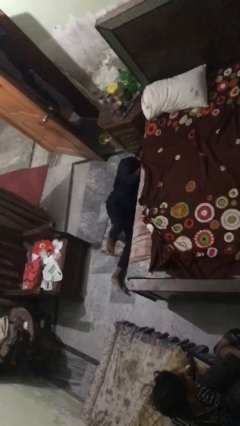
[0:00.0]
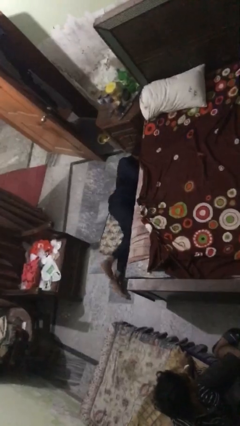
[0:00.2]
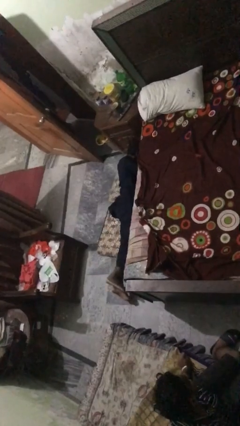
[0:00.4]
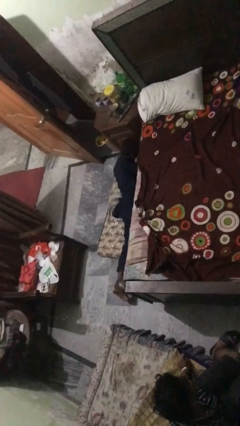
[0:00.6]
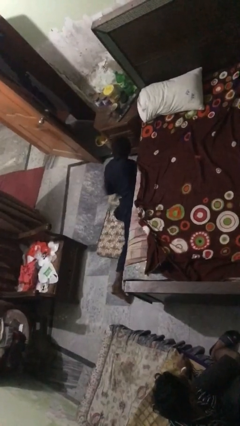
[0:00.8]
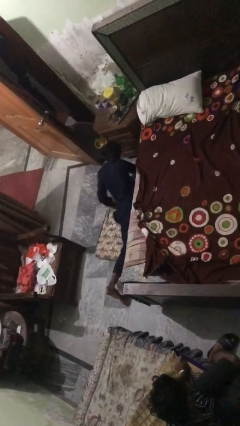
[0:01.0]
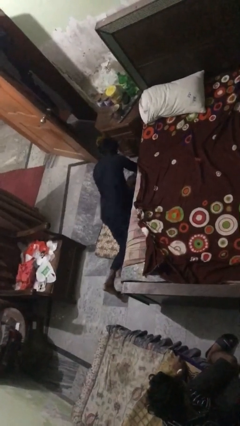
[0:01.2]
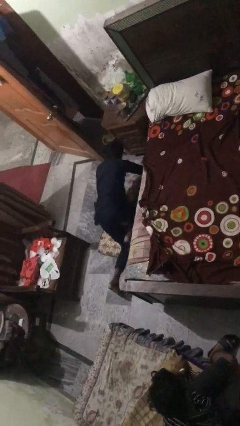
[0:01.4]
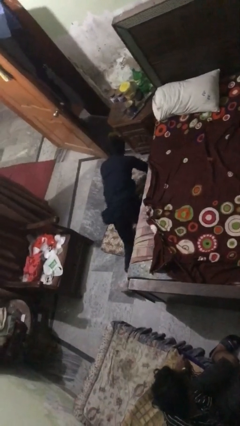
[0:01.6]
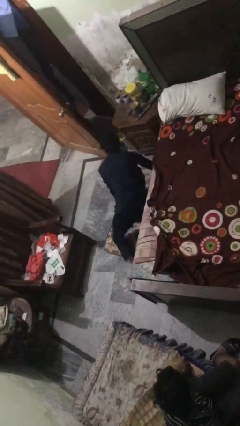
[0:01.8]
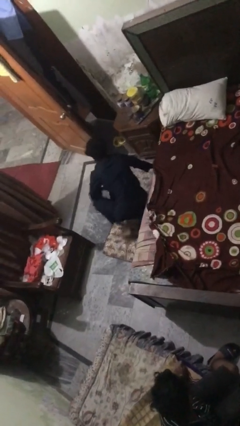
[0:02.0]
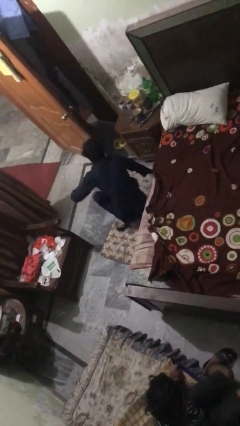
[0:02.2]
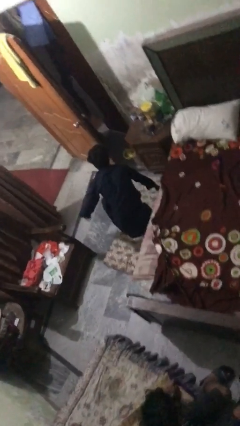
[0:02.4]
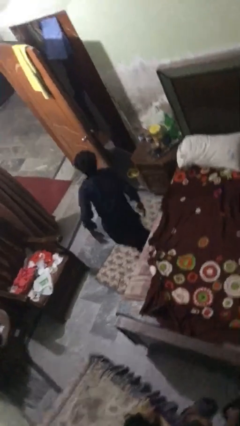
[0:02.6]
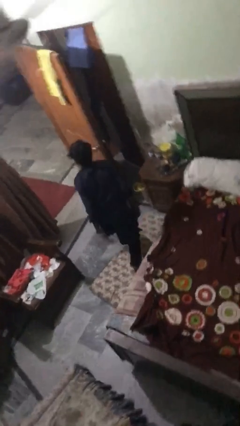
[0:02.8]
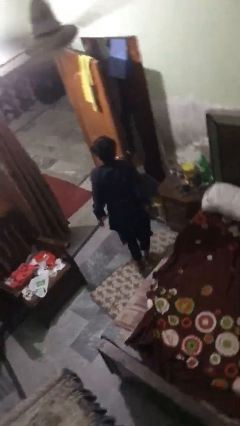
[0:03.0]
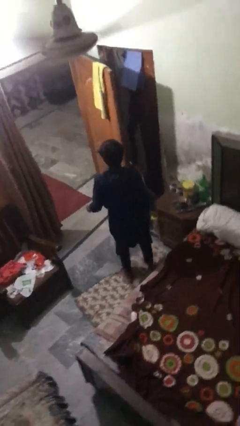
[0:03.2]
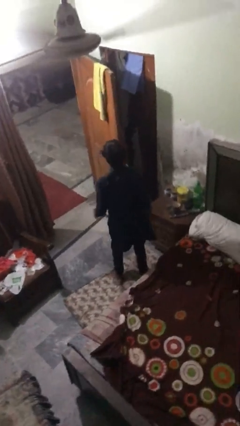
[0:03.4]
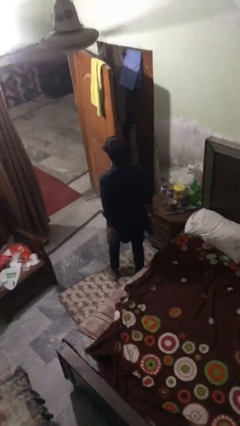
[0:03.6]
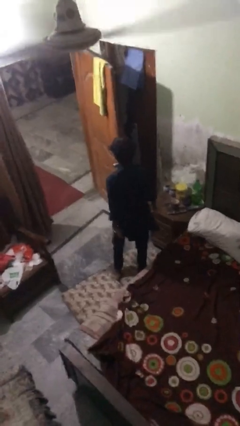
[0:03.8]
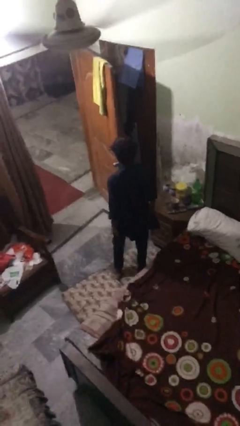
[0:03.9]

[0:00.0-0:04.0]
person stands up from floor

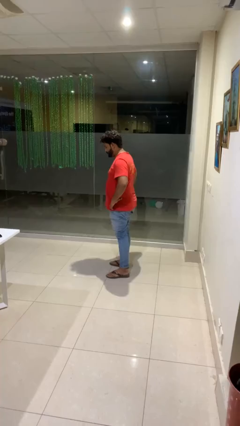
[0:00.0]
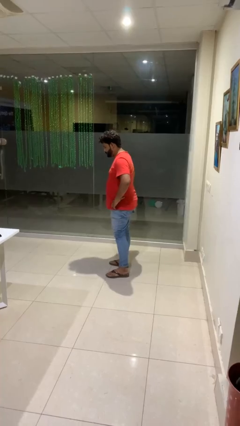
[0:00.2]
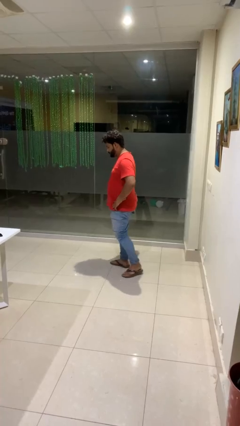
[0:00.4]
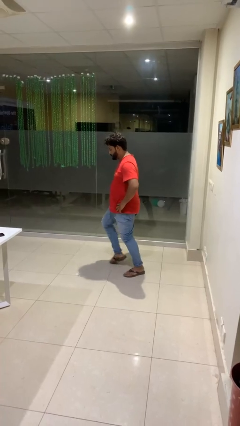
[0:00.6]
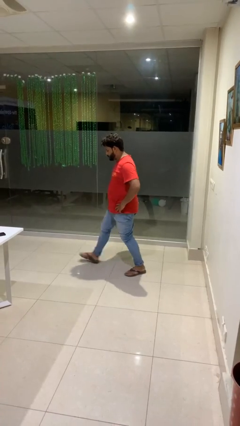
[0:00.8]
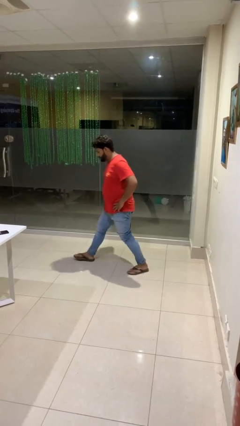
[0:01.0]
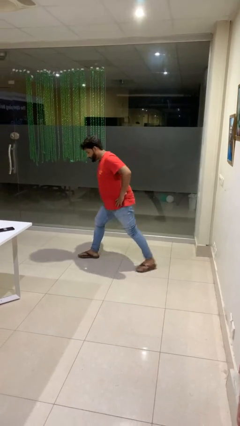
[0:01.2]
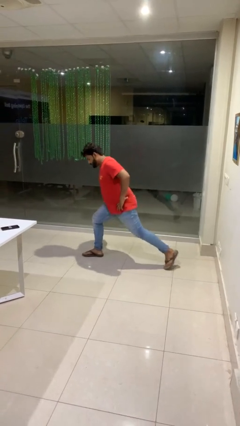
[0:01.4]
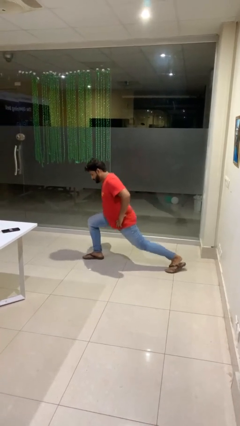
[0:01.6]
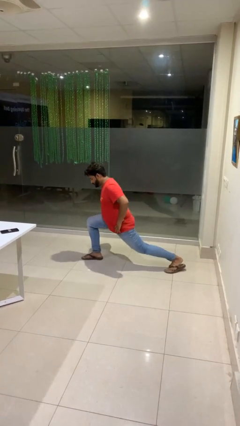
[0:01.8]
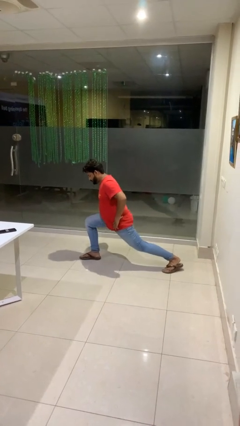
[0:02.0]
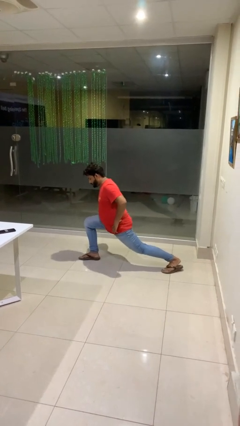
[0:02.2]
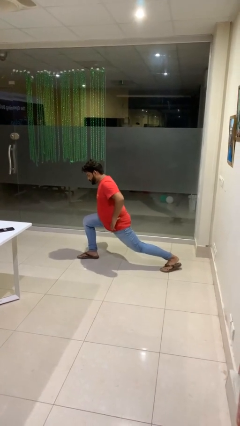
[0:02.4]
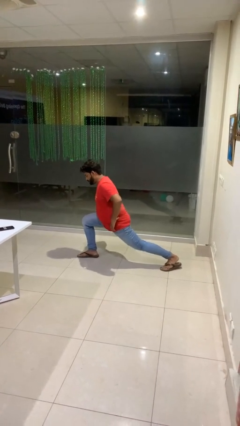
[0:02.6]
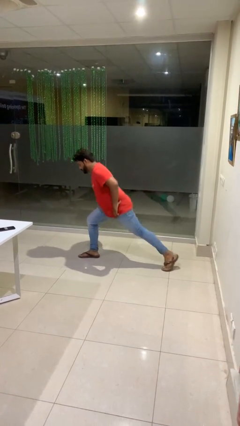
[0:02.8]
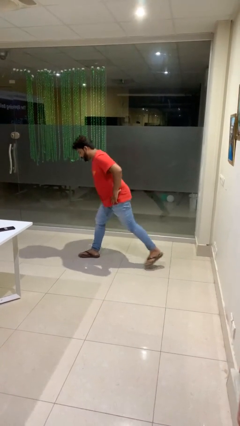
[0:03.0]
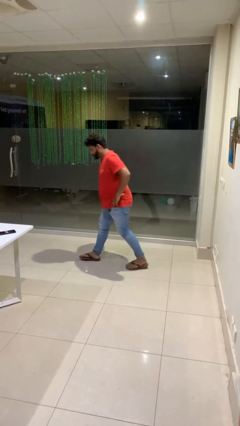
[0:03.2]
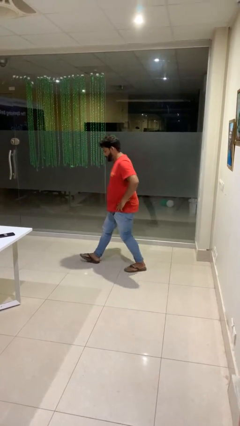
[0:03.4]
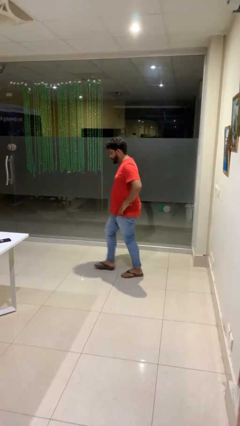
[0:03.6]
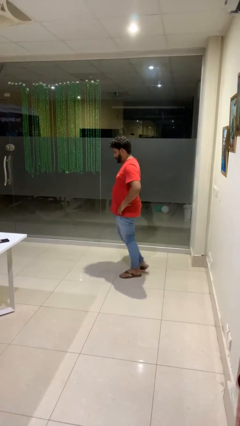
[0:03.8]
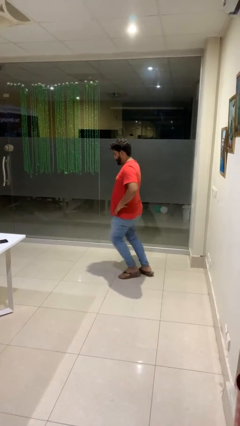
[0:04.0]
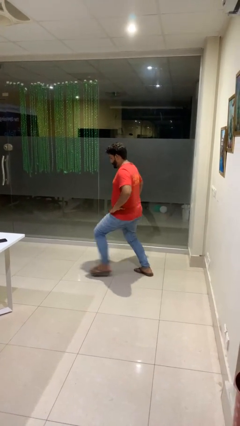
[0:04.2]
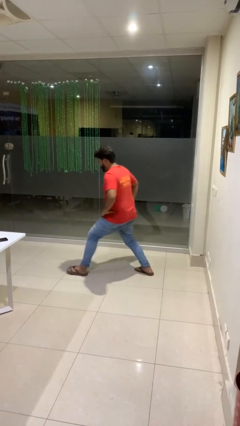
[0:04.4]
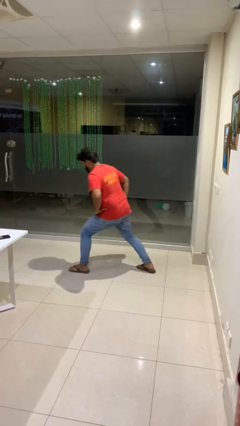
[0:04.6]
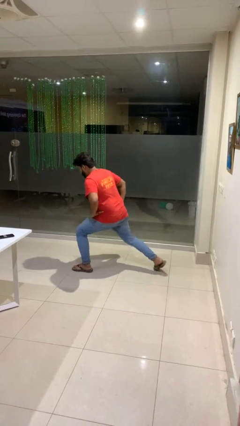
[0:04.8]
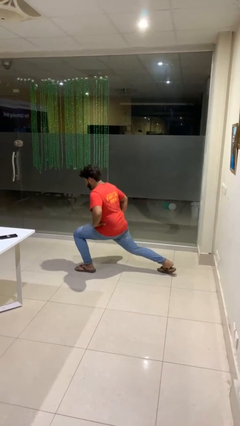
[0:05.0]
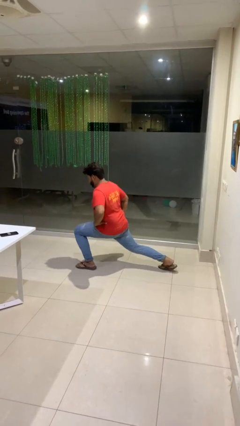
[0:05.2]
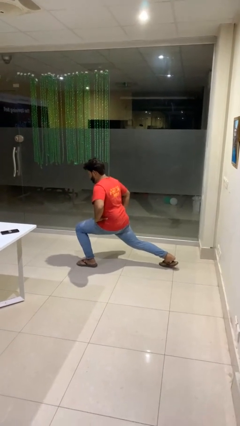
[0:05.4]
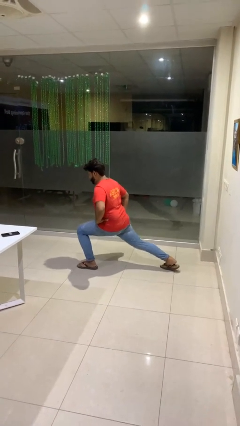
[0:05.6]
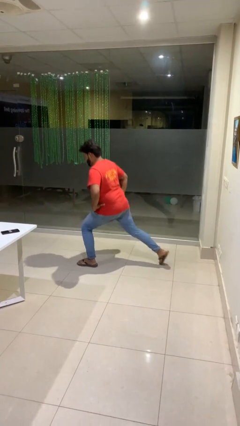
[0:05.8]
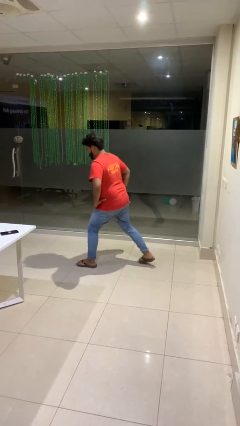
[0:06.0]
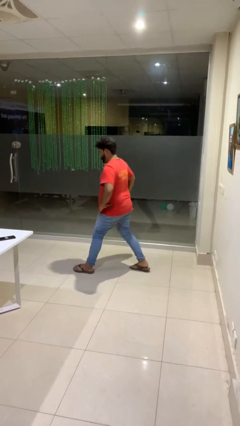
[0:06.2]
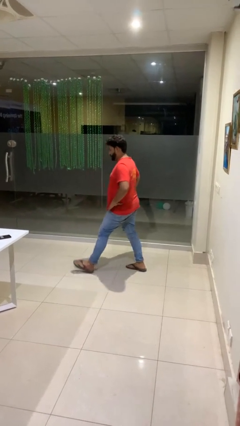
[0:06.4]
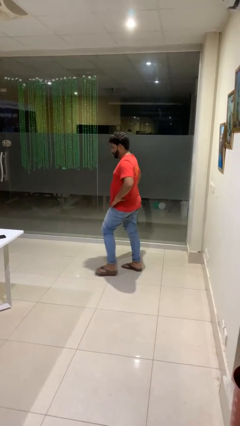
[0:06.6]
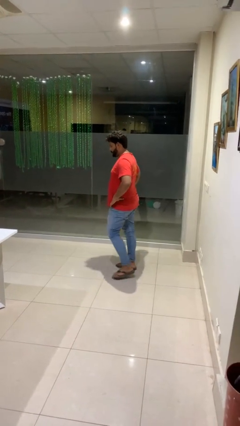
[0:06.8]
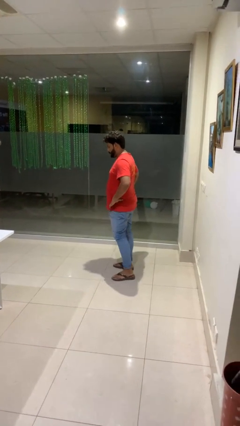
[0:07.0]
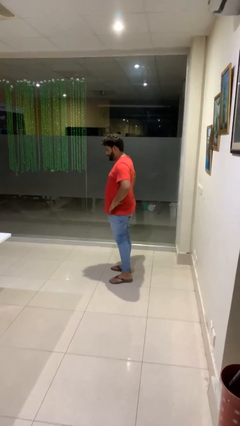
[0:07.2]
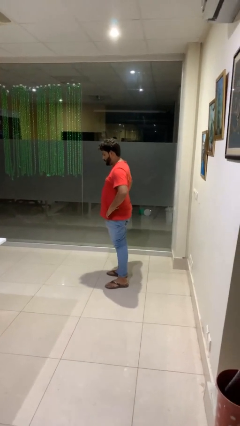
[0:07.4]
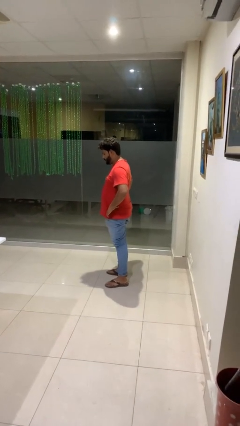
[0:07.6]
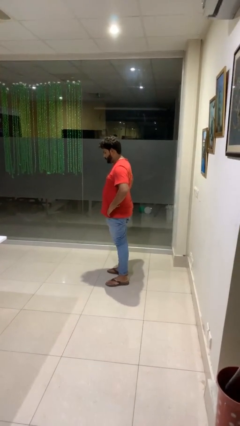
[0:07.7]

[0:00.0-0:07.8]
person exercises with lunges

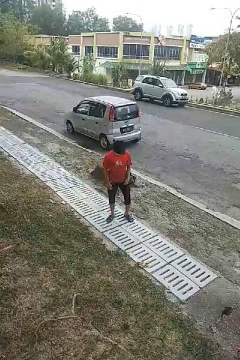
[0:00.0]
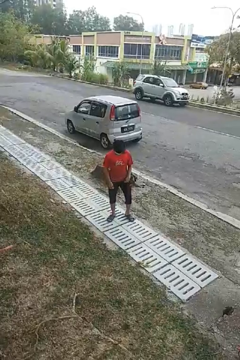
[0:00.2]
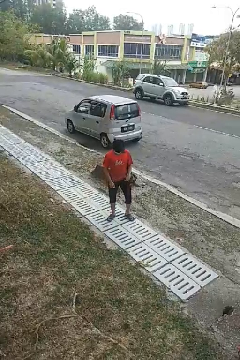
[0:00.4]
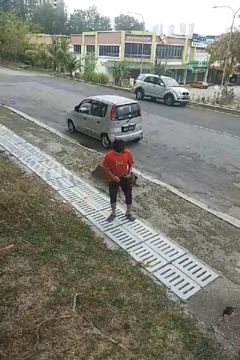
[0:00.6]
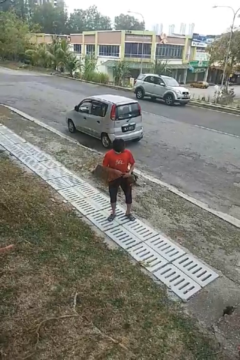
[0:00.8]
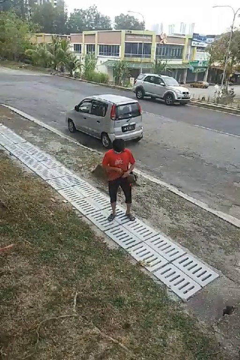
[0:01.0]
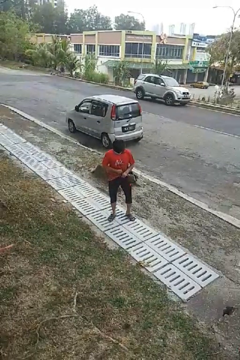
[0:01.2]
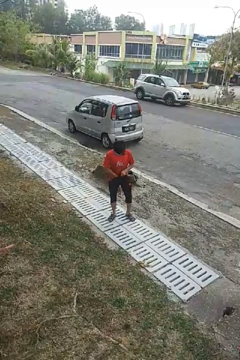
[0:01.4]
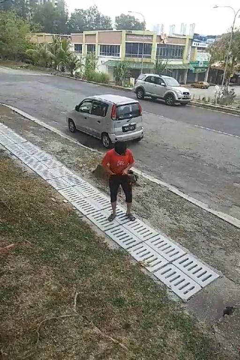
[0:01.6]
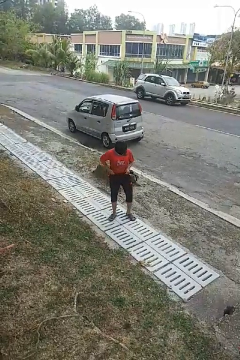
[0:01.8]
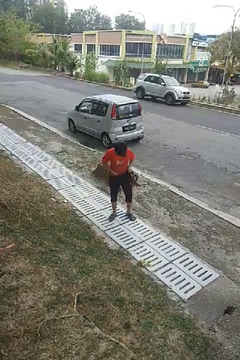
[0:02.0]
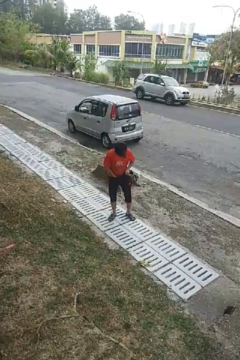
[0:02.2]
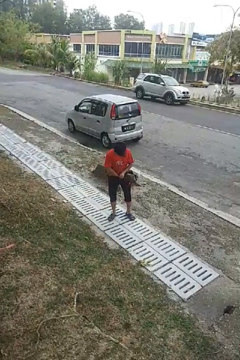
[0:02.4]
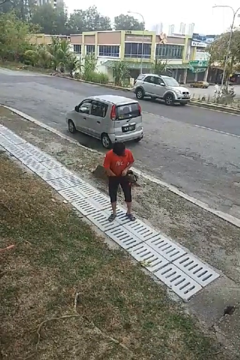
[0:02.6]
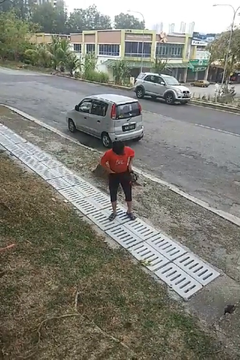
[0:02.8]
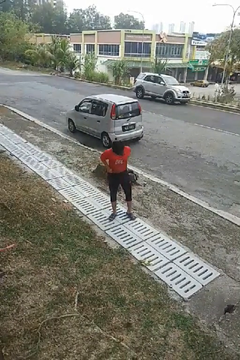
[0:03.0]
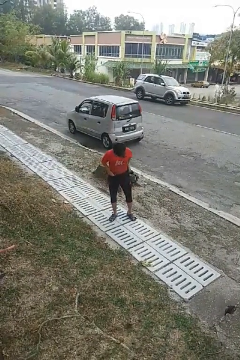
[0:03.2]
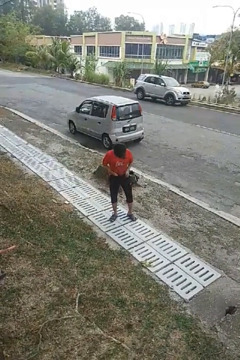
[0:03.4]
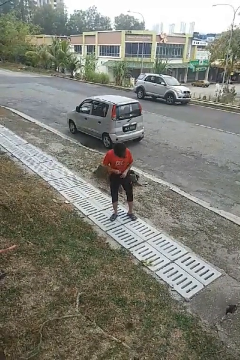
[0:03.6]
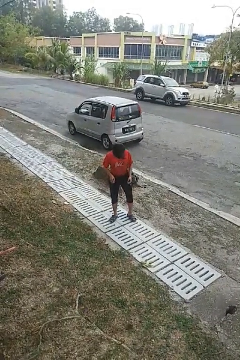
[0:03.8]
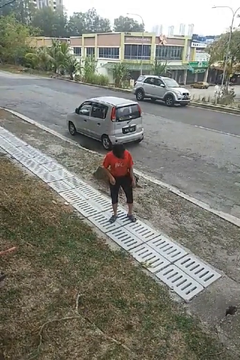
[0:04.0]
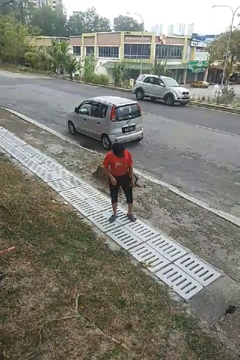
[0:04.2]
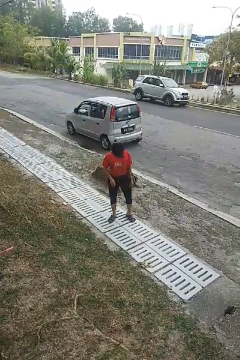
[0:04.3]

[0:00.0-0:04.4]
person tucks in shirt

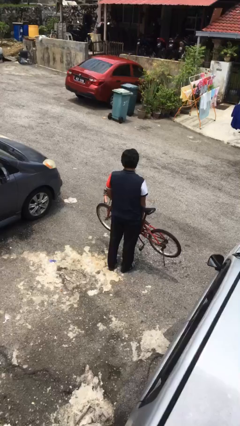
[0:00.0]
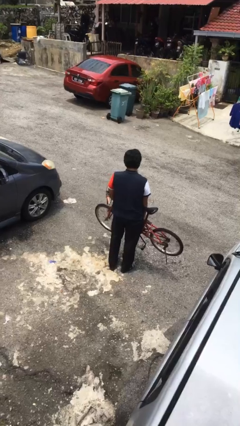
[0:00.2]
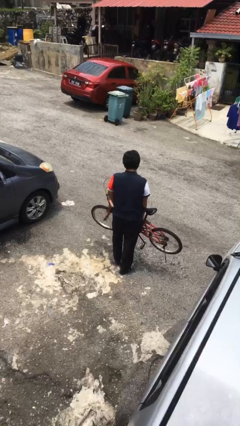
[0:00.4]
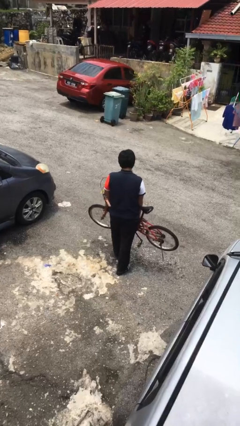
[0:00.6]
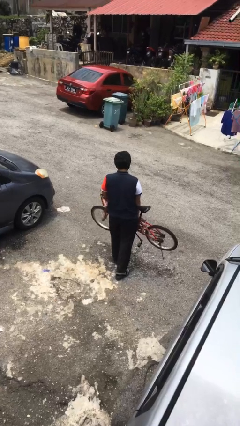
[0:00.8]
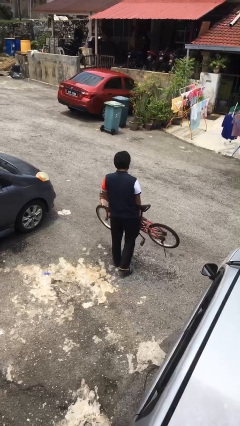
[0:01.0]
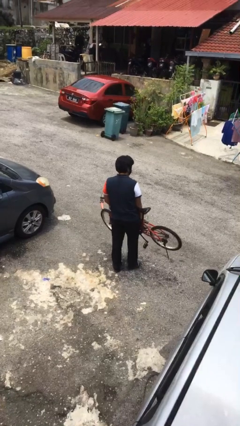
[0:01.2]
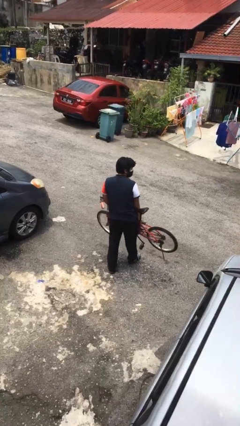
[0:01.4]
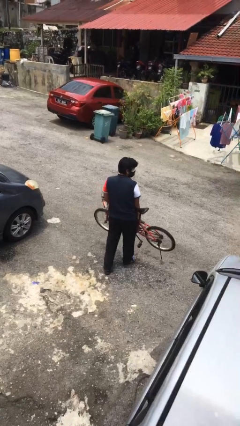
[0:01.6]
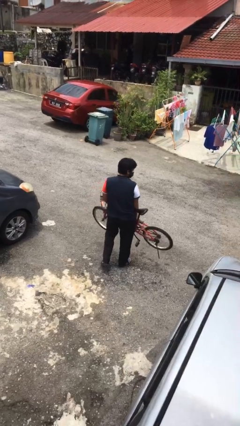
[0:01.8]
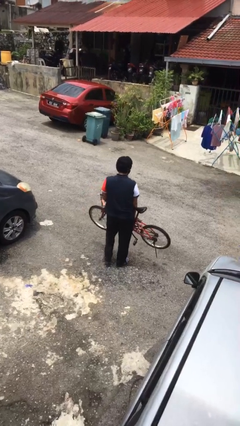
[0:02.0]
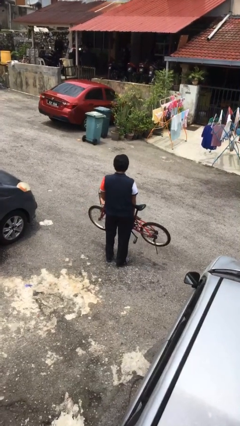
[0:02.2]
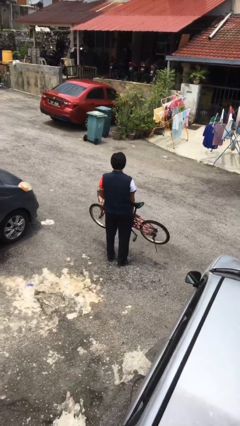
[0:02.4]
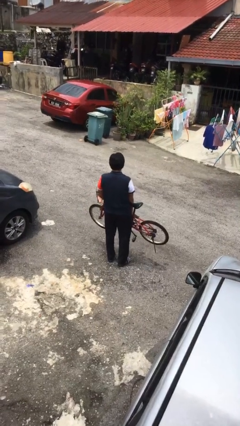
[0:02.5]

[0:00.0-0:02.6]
person carries bicycle

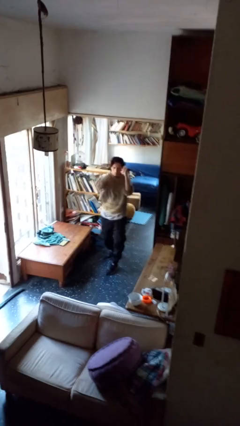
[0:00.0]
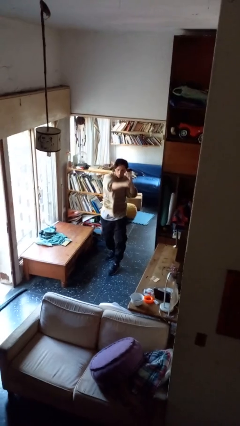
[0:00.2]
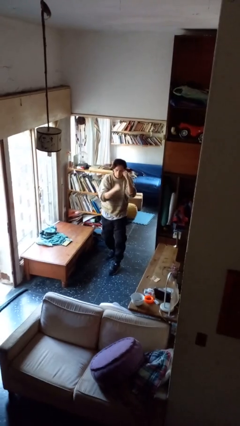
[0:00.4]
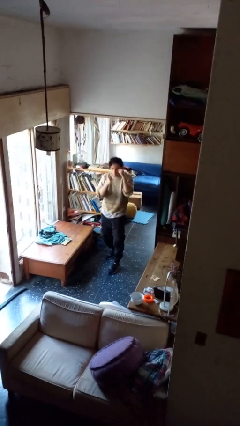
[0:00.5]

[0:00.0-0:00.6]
person punches
